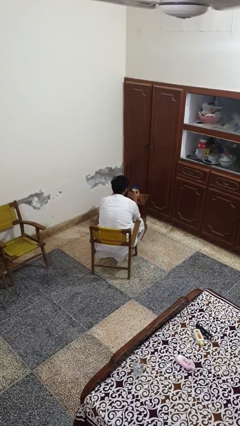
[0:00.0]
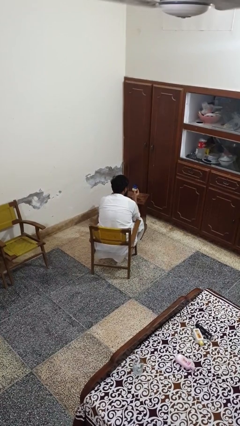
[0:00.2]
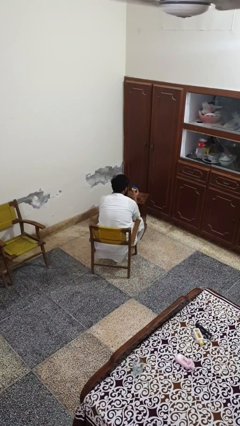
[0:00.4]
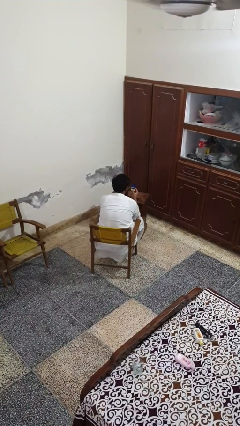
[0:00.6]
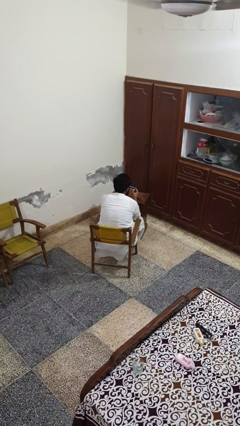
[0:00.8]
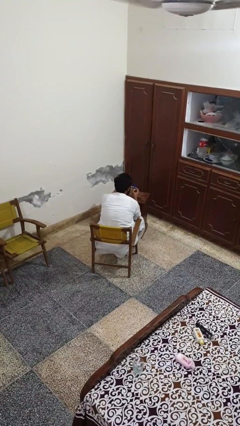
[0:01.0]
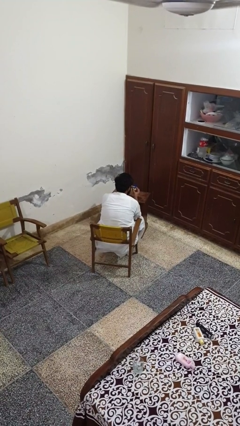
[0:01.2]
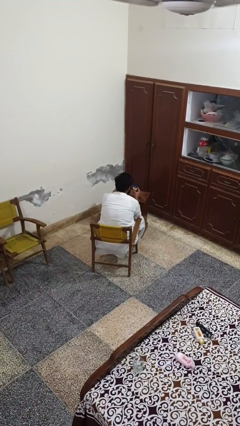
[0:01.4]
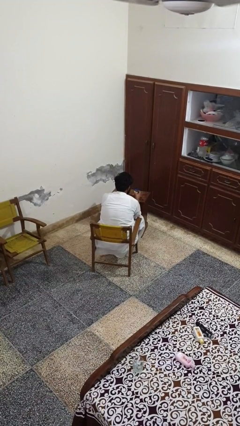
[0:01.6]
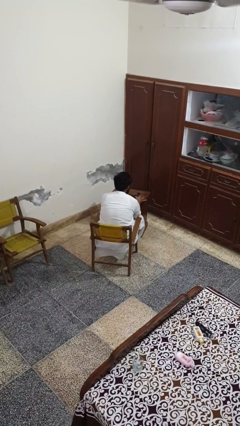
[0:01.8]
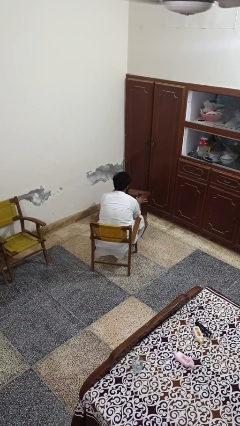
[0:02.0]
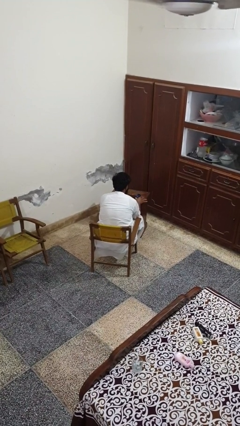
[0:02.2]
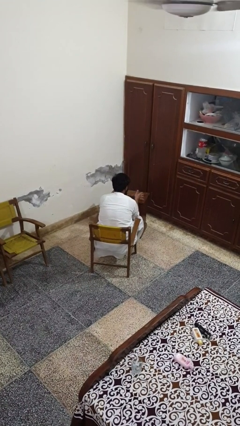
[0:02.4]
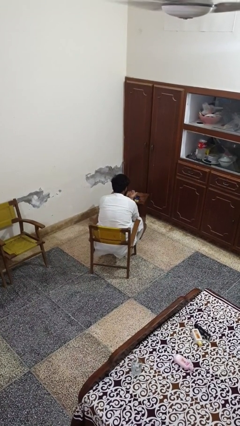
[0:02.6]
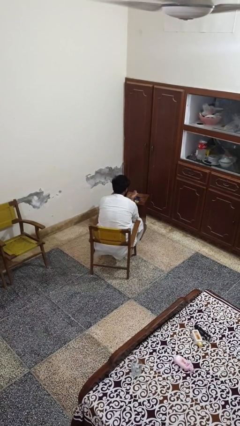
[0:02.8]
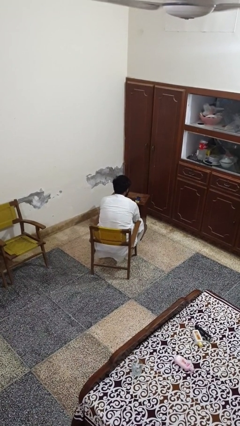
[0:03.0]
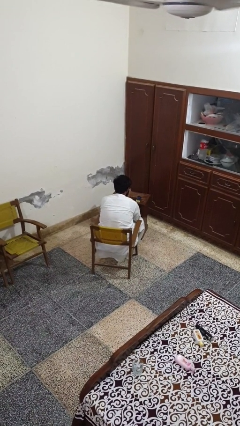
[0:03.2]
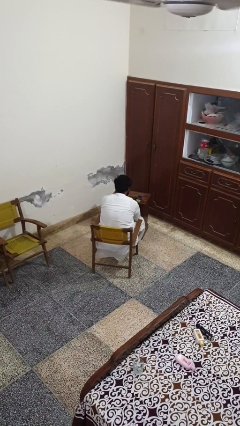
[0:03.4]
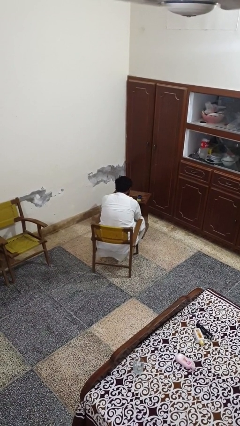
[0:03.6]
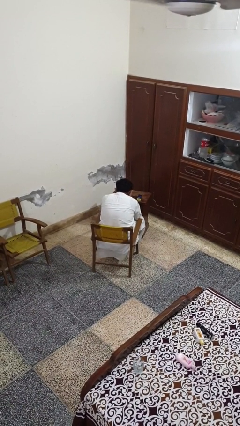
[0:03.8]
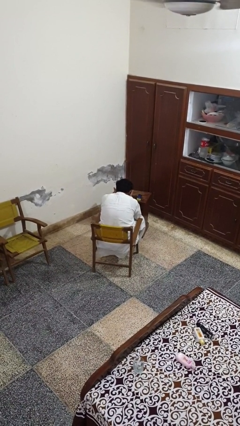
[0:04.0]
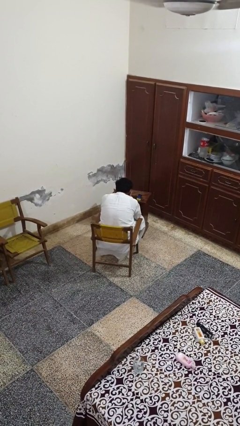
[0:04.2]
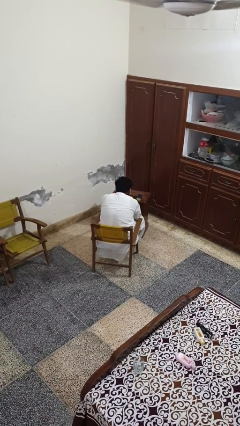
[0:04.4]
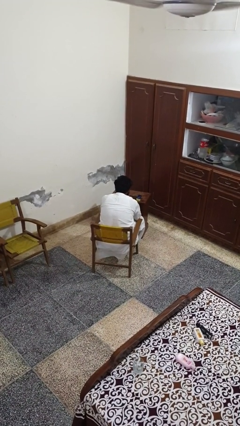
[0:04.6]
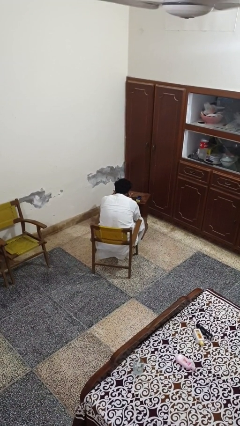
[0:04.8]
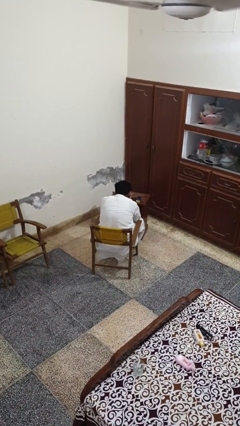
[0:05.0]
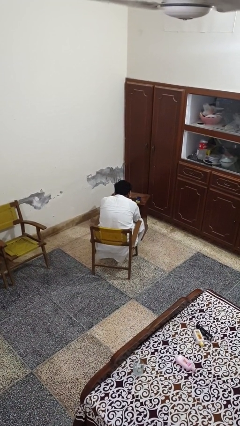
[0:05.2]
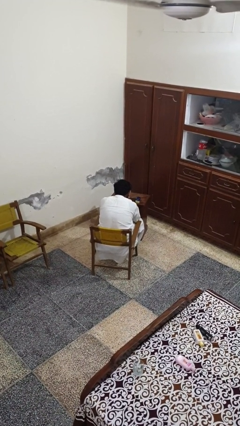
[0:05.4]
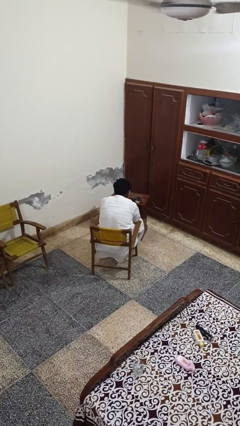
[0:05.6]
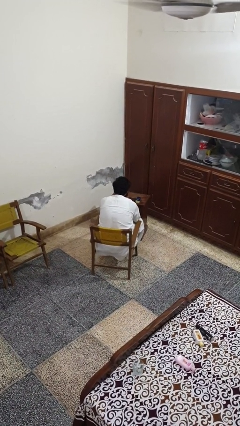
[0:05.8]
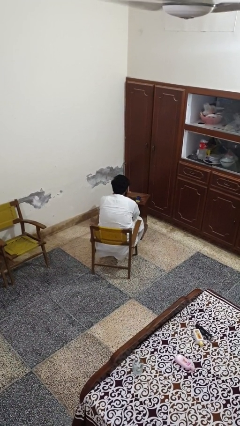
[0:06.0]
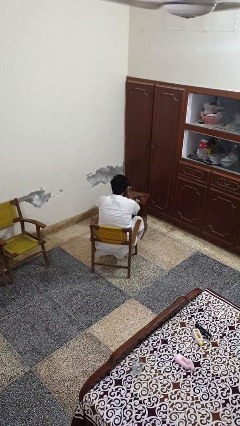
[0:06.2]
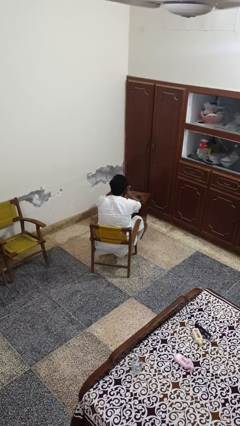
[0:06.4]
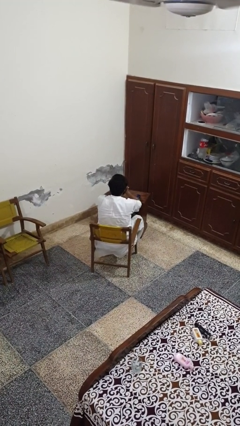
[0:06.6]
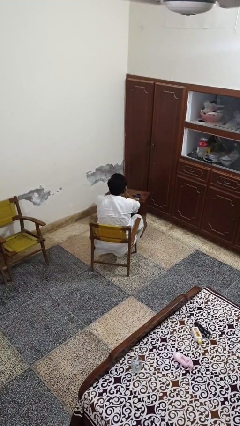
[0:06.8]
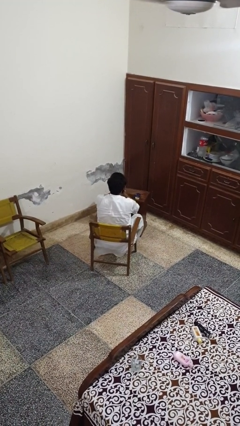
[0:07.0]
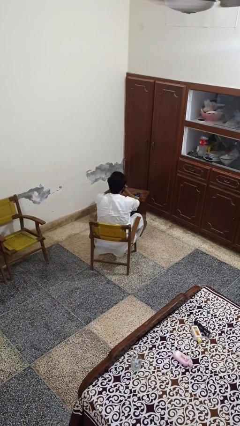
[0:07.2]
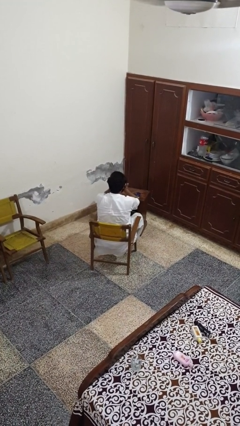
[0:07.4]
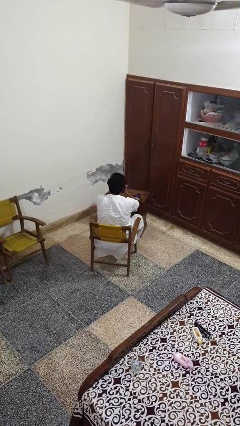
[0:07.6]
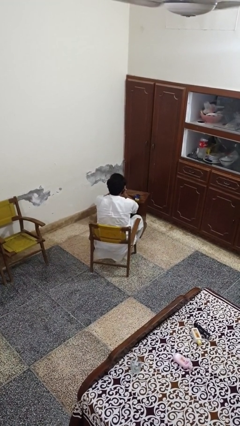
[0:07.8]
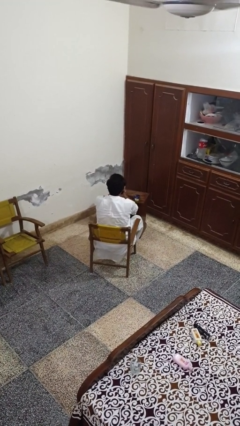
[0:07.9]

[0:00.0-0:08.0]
person applies facial moisturizer

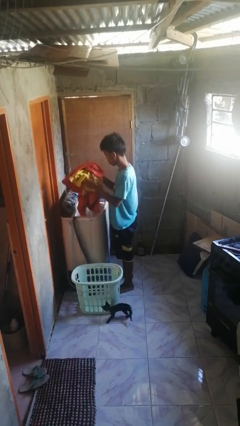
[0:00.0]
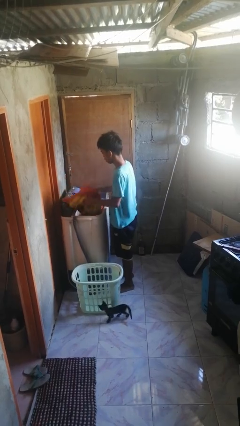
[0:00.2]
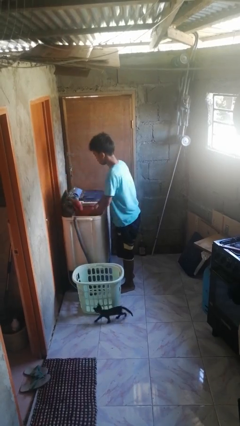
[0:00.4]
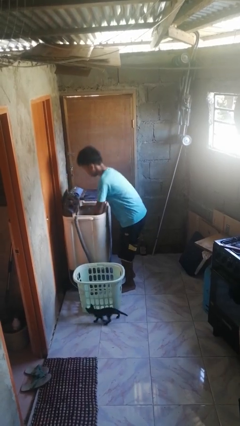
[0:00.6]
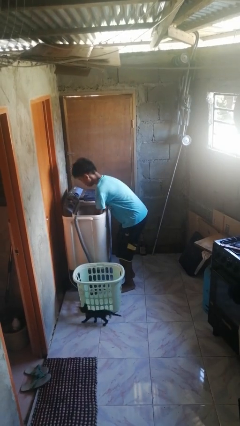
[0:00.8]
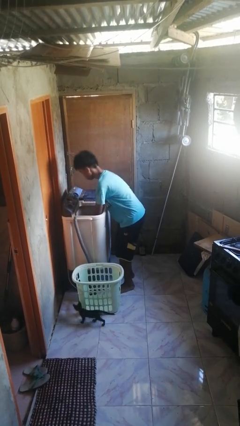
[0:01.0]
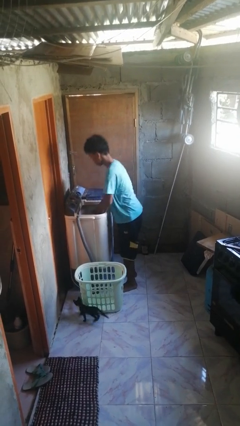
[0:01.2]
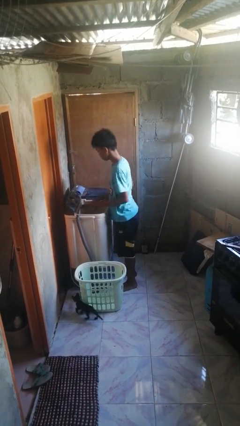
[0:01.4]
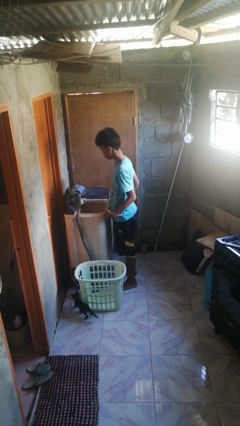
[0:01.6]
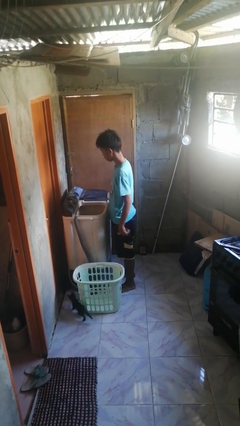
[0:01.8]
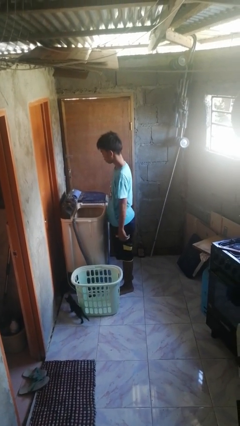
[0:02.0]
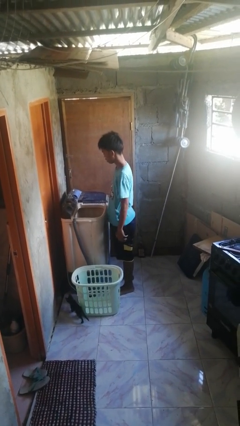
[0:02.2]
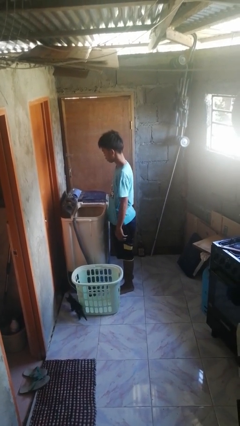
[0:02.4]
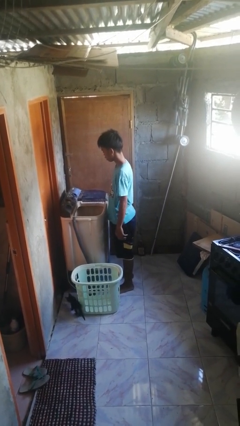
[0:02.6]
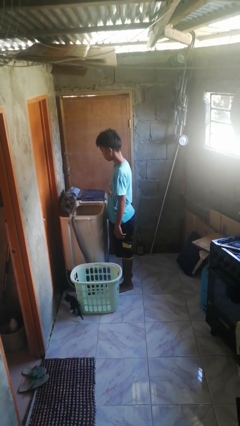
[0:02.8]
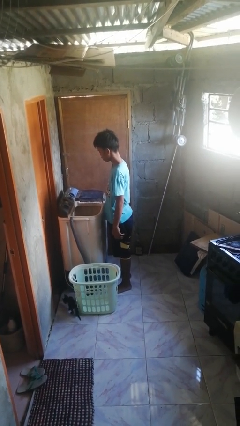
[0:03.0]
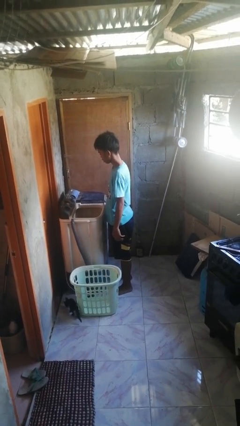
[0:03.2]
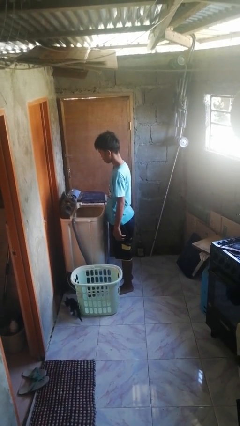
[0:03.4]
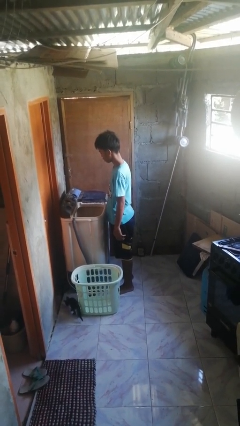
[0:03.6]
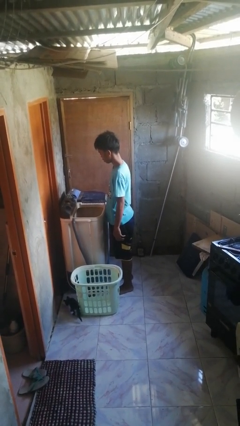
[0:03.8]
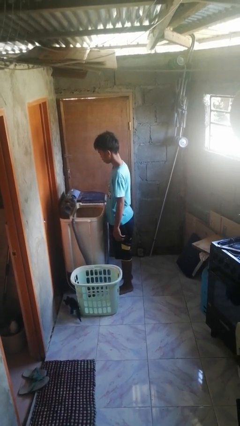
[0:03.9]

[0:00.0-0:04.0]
person loads clotheswasher

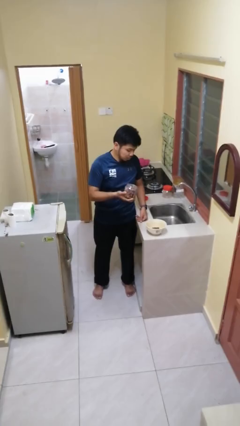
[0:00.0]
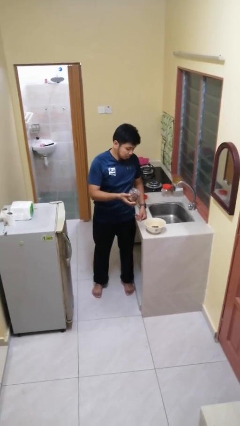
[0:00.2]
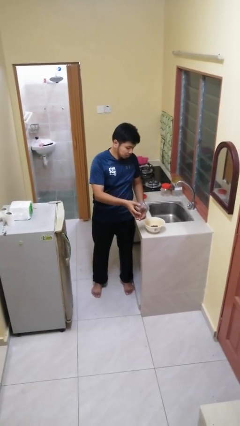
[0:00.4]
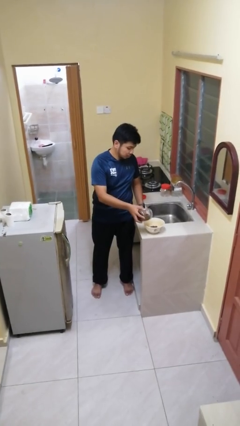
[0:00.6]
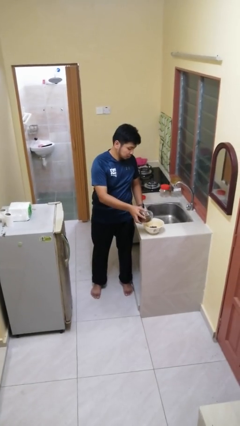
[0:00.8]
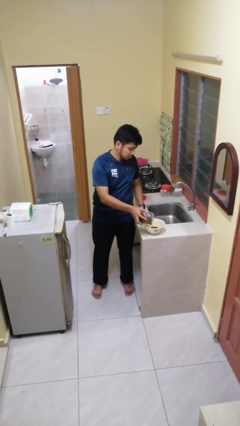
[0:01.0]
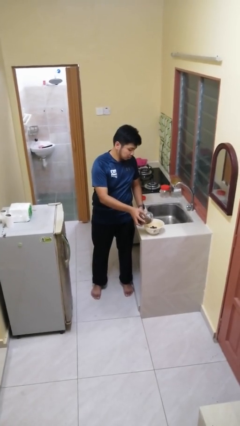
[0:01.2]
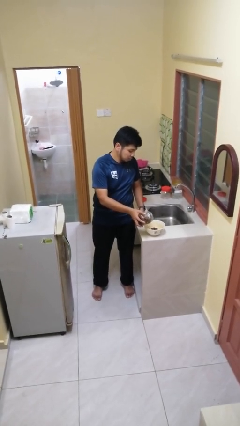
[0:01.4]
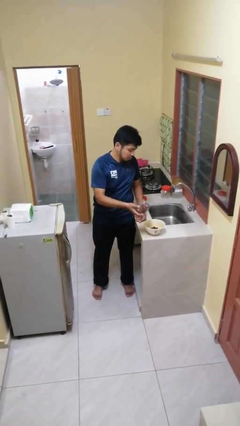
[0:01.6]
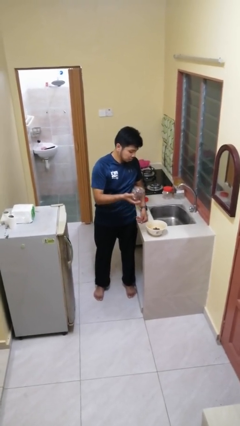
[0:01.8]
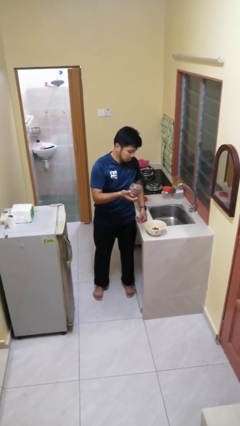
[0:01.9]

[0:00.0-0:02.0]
person pours into bowl

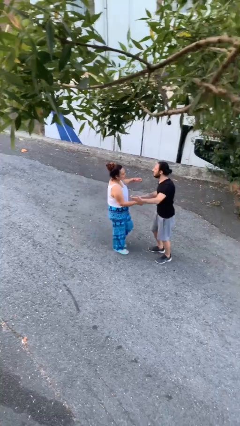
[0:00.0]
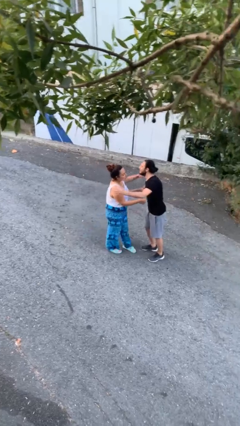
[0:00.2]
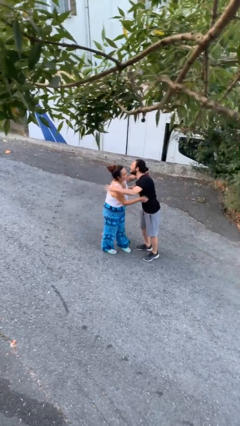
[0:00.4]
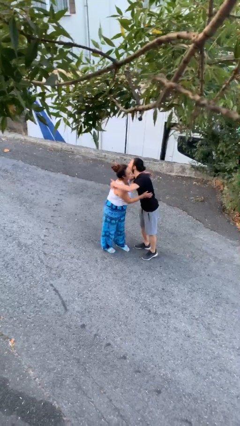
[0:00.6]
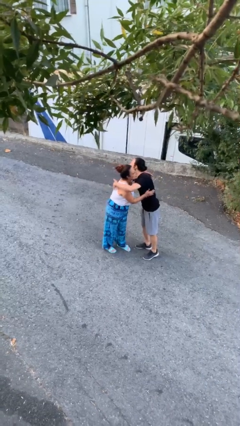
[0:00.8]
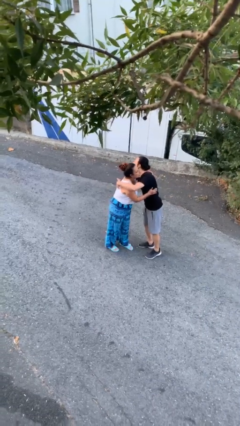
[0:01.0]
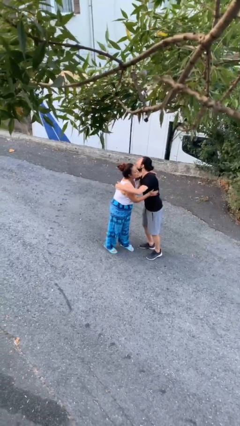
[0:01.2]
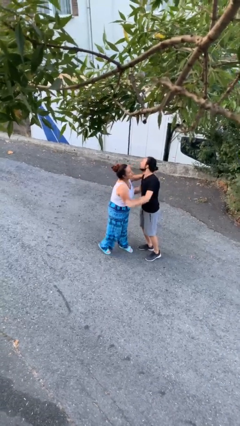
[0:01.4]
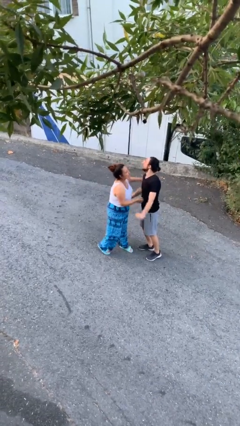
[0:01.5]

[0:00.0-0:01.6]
person embraces person

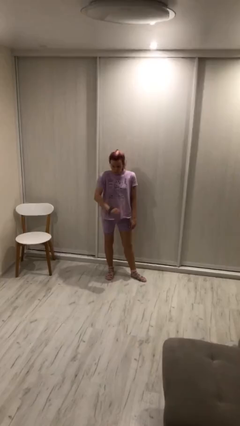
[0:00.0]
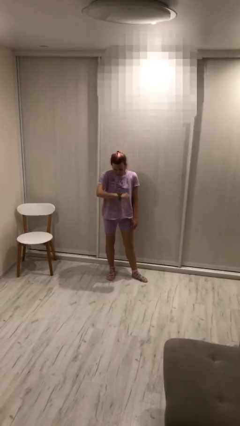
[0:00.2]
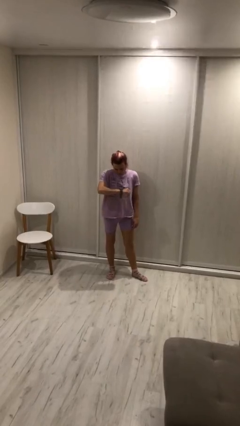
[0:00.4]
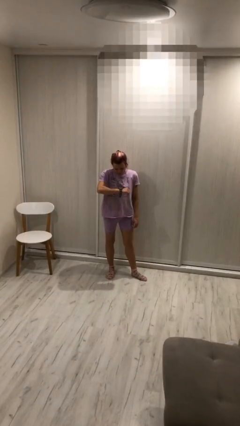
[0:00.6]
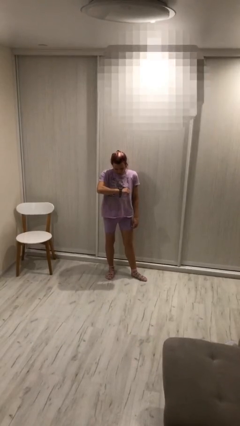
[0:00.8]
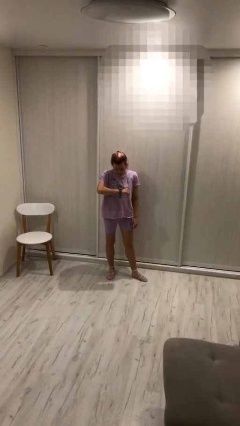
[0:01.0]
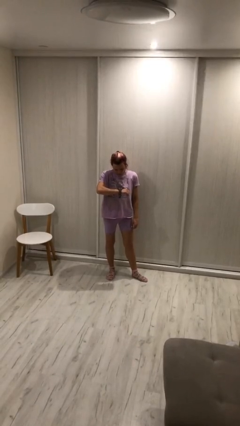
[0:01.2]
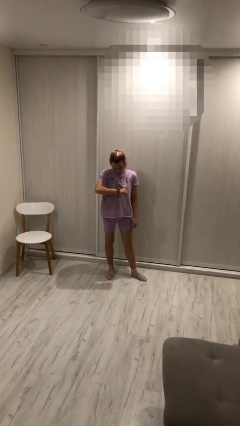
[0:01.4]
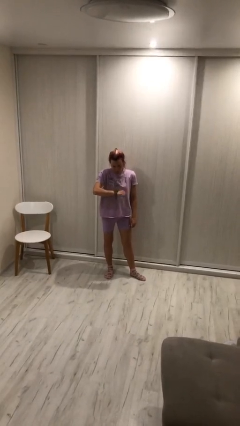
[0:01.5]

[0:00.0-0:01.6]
person looks at wristwatch

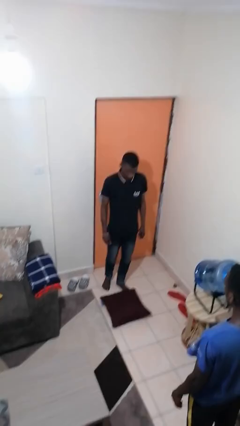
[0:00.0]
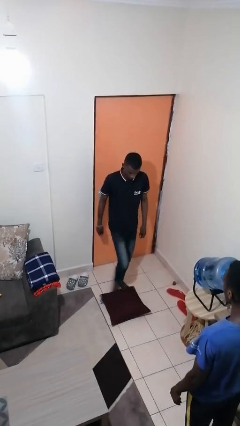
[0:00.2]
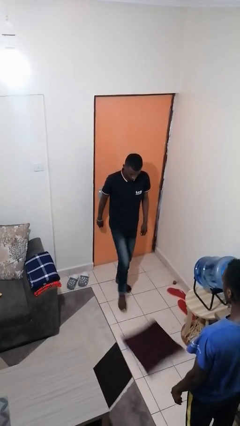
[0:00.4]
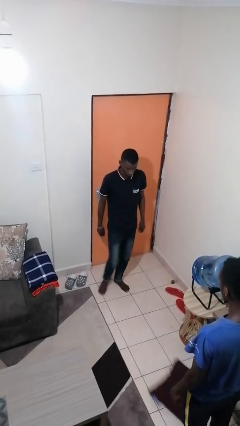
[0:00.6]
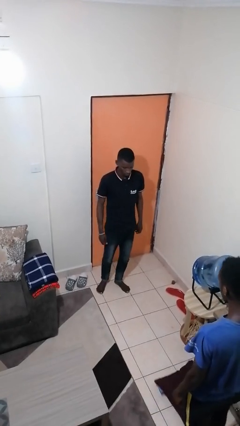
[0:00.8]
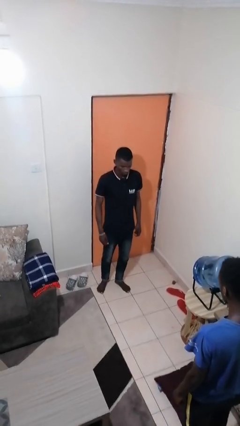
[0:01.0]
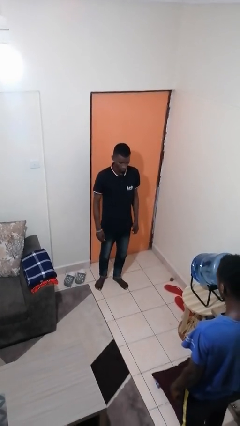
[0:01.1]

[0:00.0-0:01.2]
person kicks object to person
